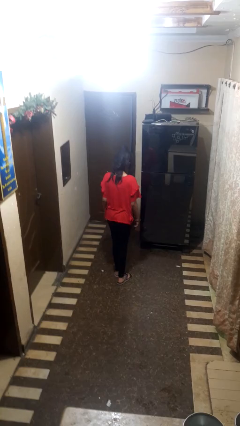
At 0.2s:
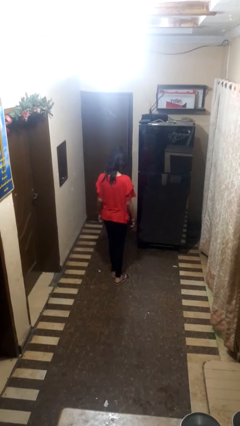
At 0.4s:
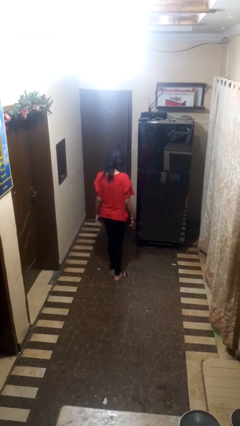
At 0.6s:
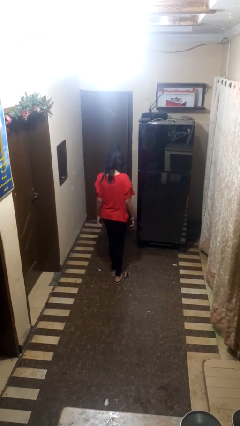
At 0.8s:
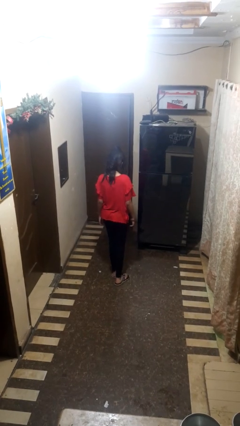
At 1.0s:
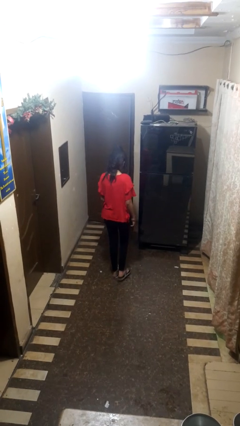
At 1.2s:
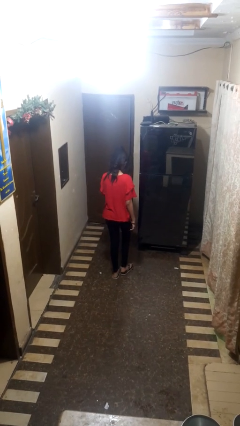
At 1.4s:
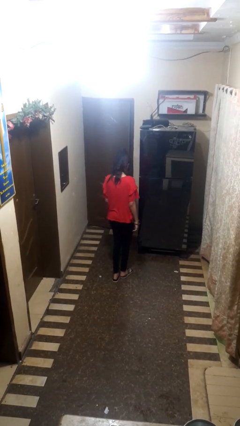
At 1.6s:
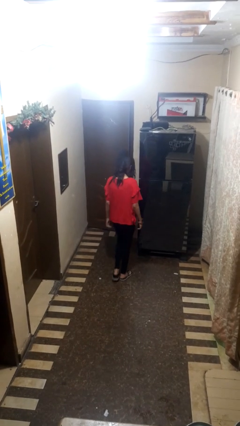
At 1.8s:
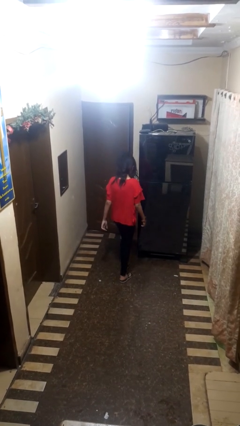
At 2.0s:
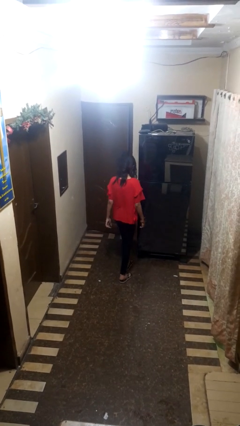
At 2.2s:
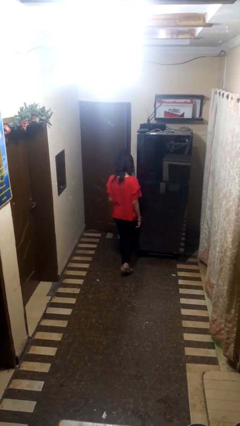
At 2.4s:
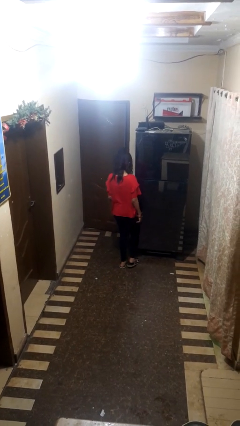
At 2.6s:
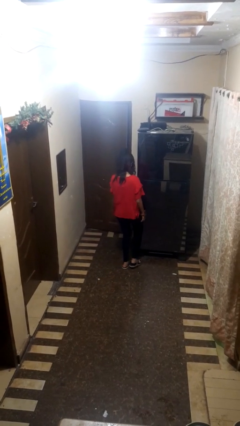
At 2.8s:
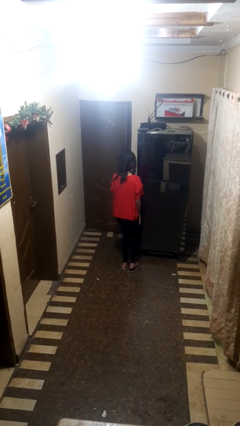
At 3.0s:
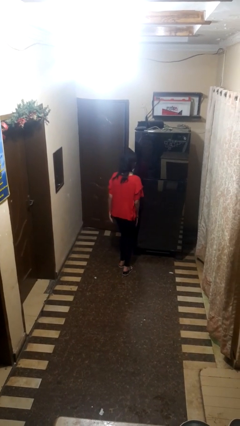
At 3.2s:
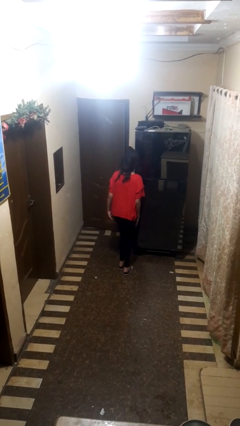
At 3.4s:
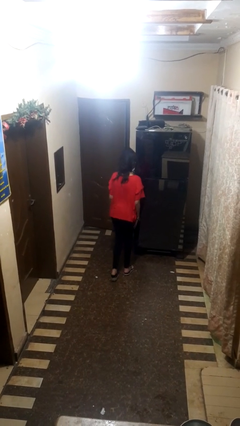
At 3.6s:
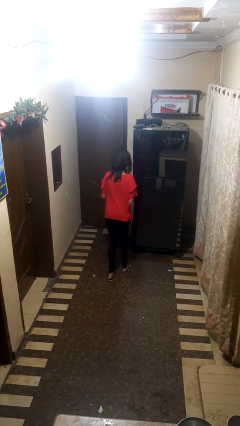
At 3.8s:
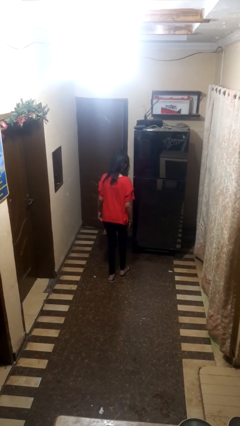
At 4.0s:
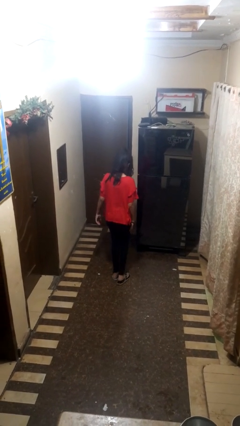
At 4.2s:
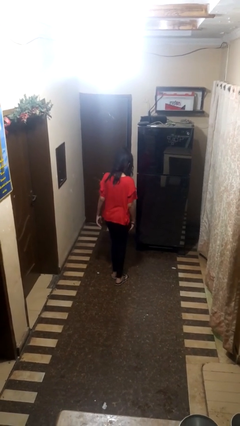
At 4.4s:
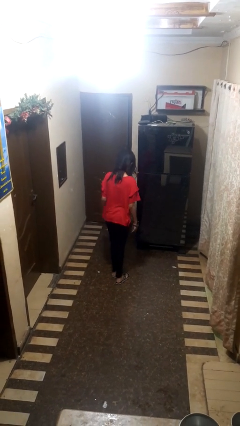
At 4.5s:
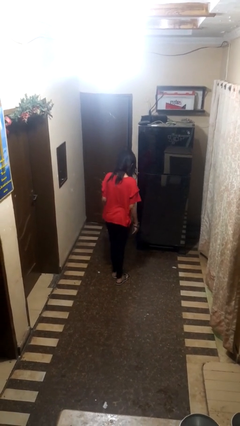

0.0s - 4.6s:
person stubs toe

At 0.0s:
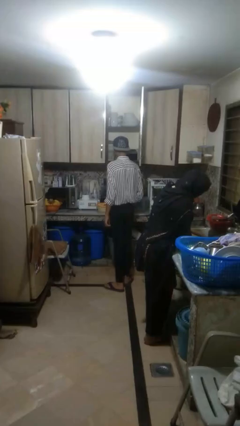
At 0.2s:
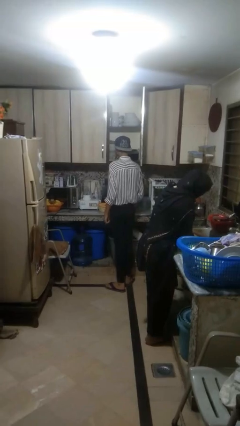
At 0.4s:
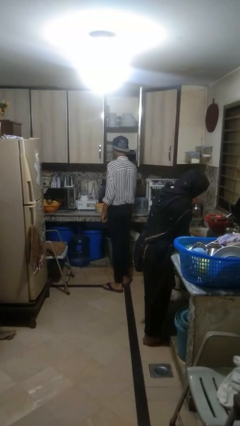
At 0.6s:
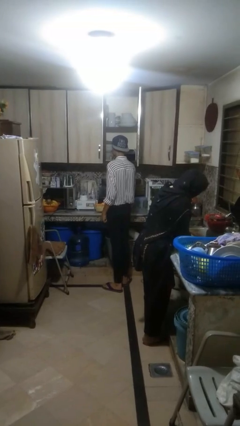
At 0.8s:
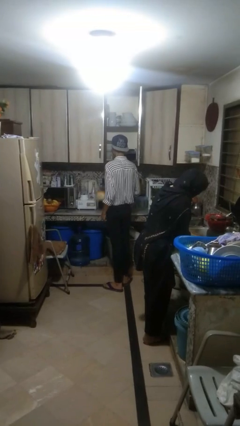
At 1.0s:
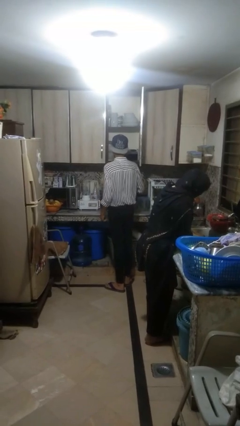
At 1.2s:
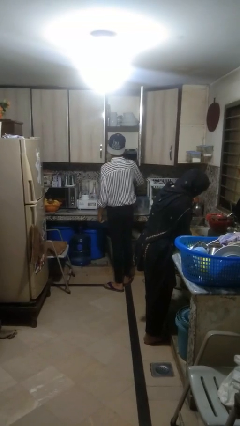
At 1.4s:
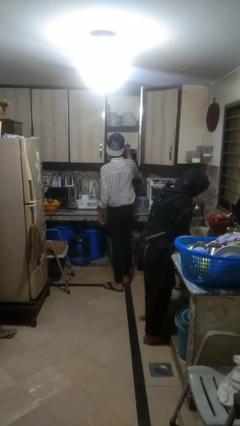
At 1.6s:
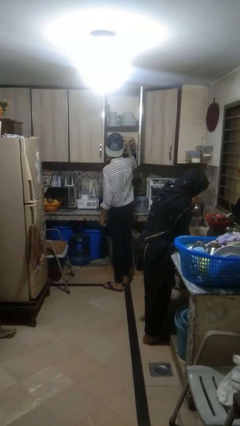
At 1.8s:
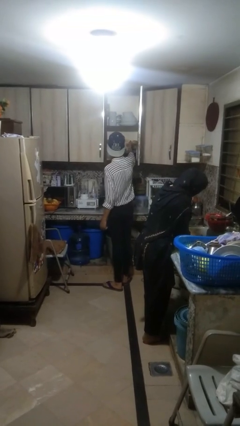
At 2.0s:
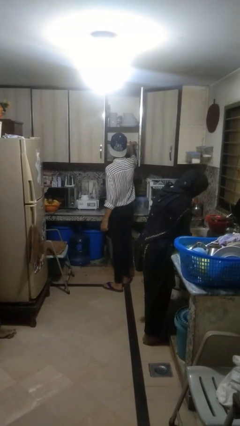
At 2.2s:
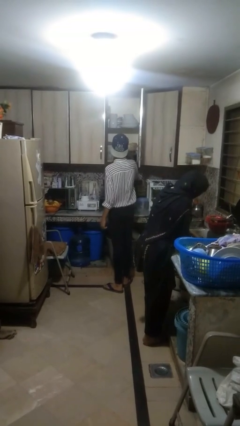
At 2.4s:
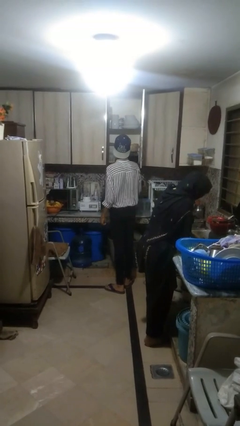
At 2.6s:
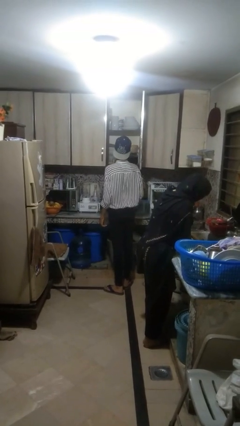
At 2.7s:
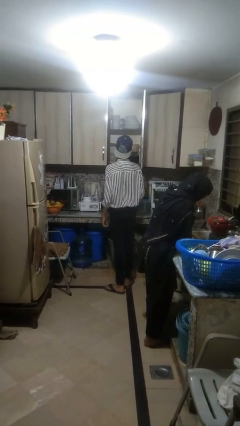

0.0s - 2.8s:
person puts object in cabinet

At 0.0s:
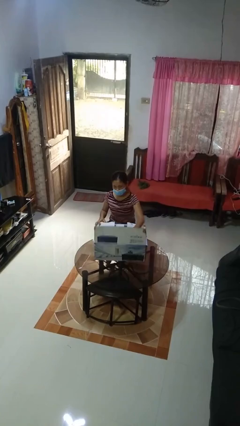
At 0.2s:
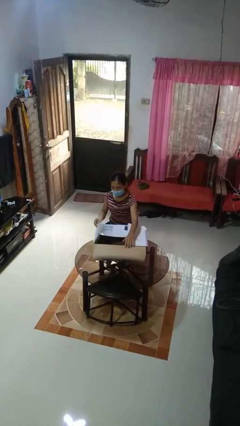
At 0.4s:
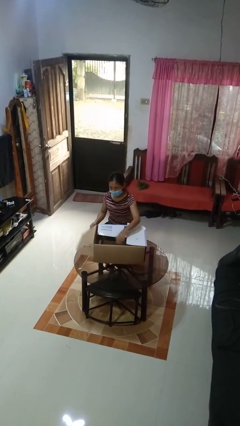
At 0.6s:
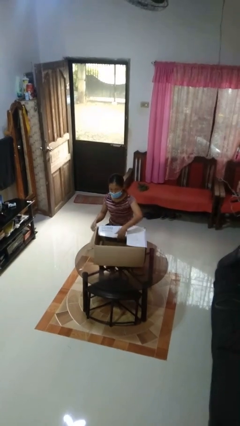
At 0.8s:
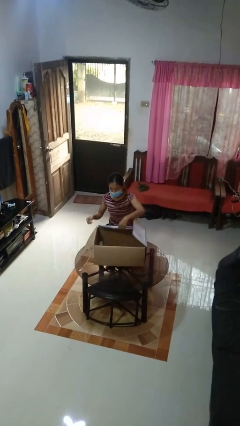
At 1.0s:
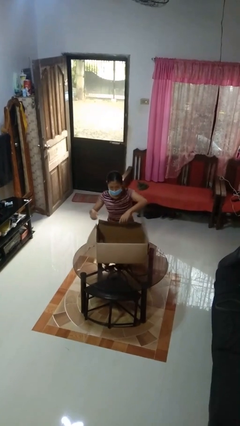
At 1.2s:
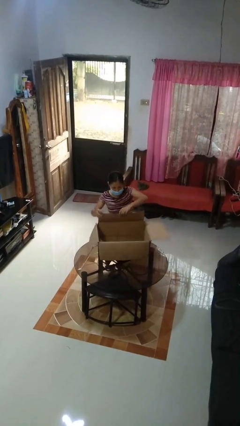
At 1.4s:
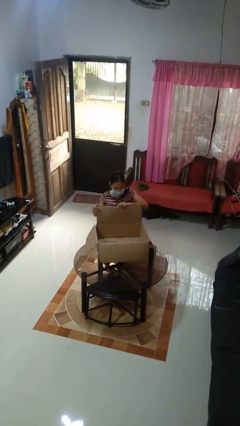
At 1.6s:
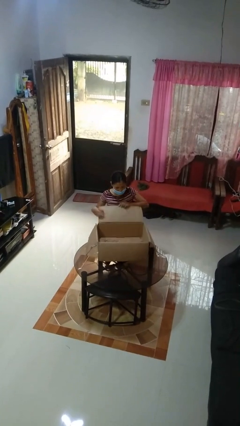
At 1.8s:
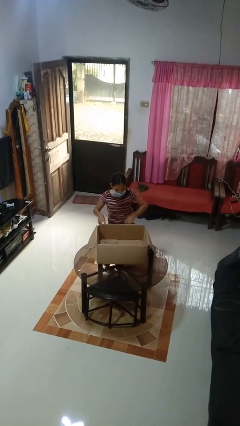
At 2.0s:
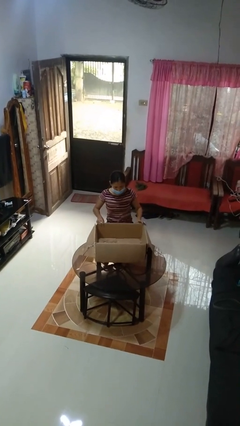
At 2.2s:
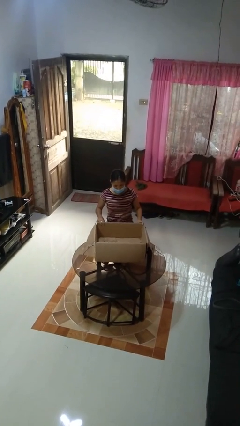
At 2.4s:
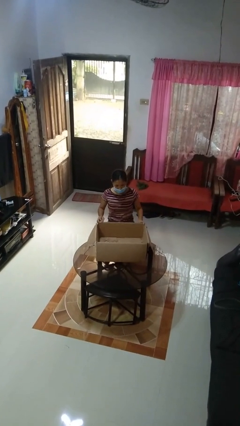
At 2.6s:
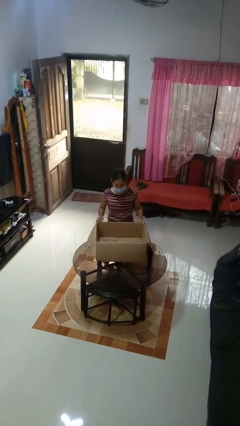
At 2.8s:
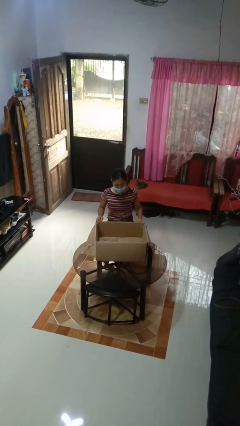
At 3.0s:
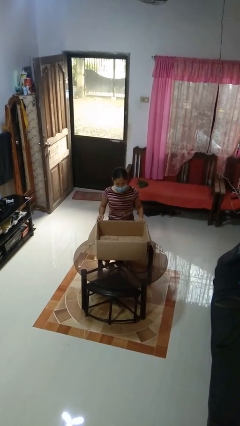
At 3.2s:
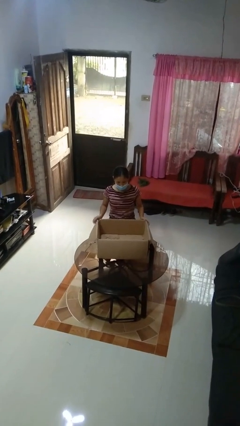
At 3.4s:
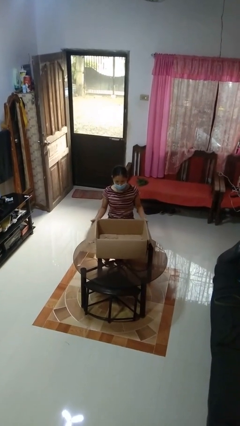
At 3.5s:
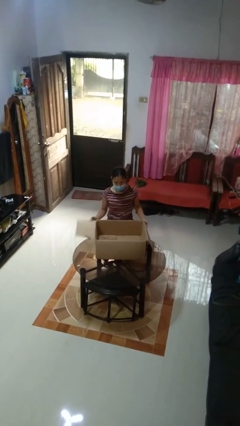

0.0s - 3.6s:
person opens box

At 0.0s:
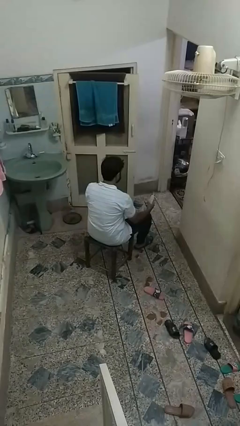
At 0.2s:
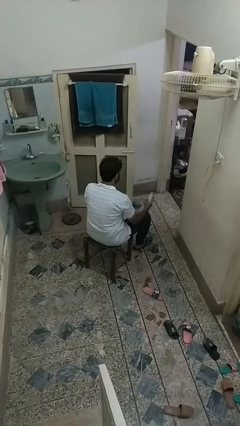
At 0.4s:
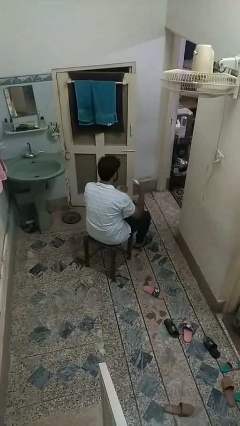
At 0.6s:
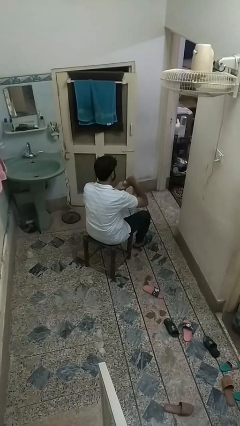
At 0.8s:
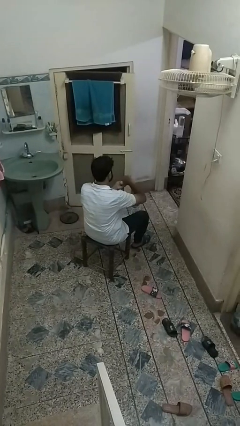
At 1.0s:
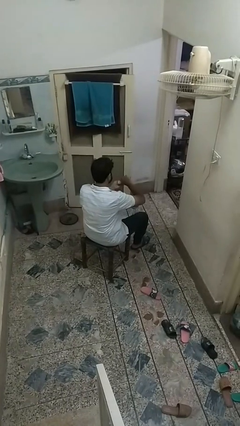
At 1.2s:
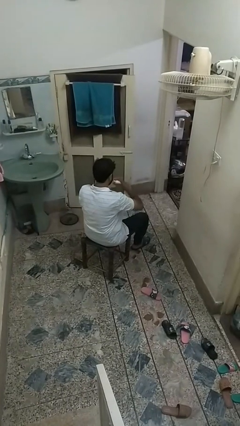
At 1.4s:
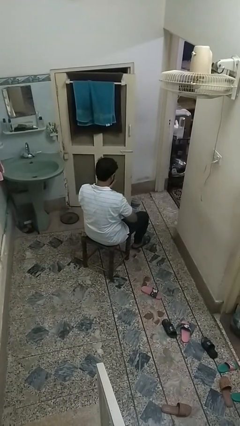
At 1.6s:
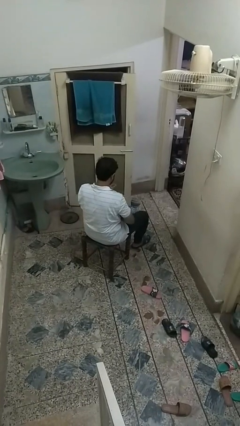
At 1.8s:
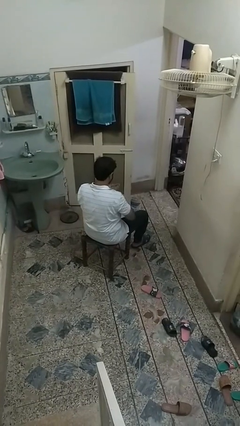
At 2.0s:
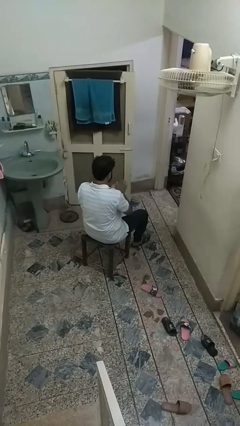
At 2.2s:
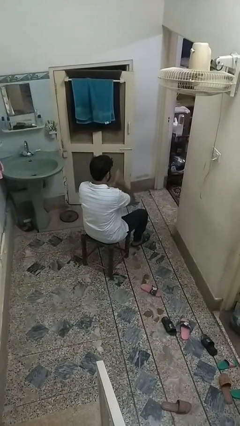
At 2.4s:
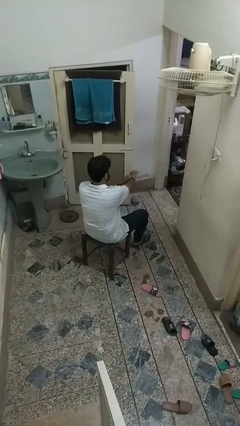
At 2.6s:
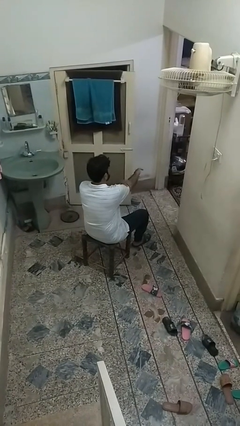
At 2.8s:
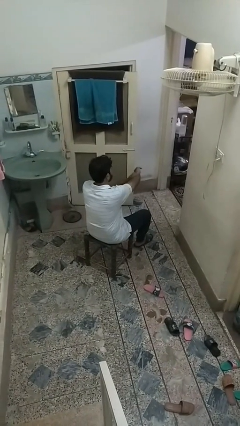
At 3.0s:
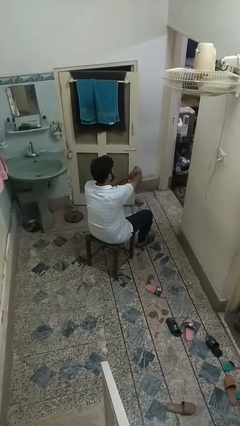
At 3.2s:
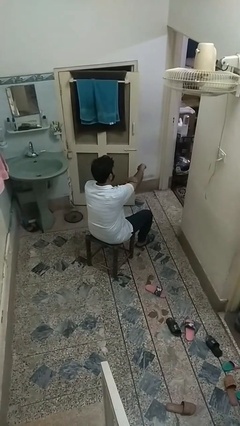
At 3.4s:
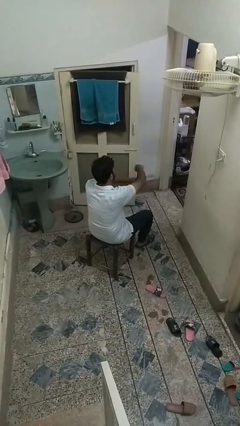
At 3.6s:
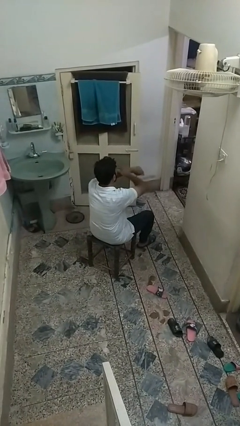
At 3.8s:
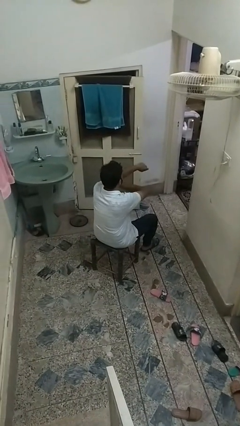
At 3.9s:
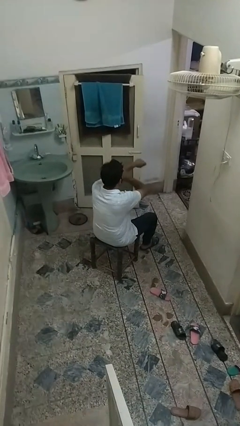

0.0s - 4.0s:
person applies sunscreen

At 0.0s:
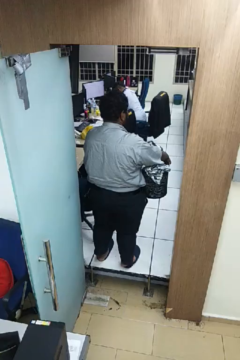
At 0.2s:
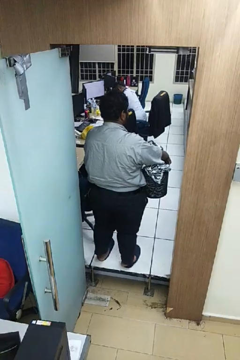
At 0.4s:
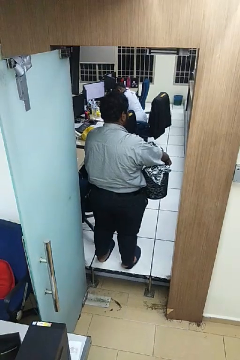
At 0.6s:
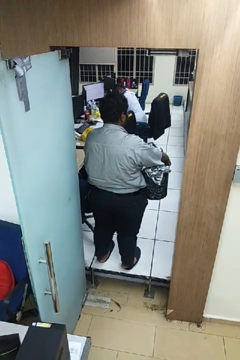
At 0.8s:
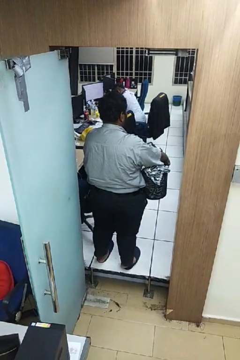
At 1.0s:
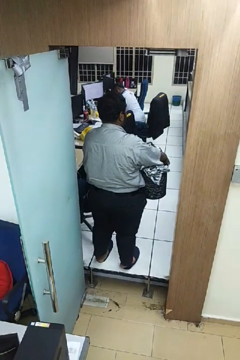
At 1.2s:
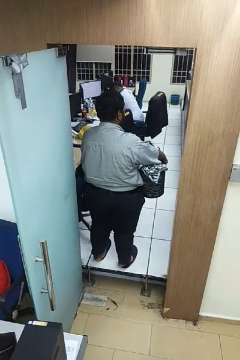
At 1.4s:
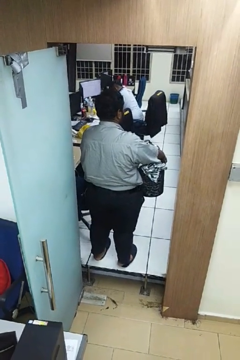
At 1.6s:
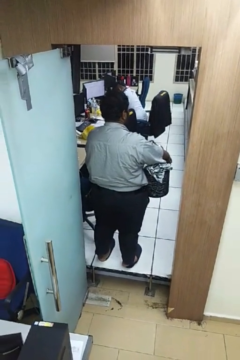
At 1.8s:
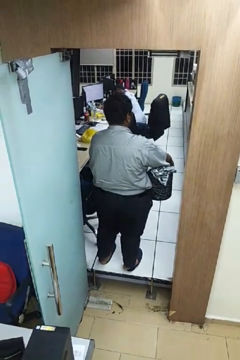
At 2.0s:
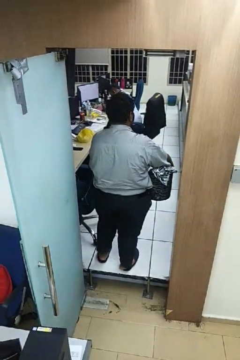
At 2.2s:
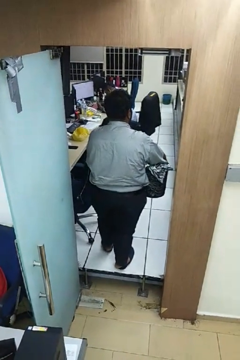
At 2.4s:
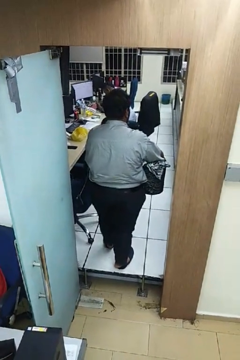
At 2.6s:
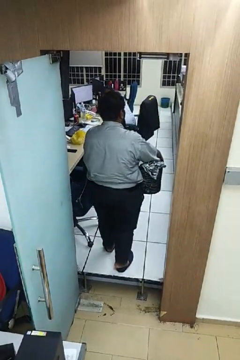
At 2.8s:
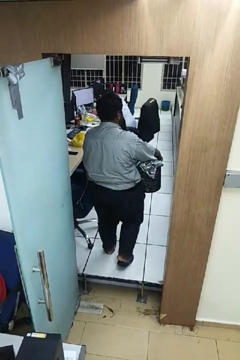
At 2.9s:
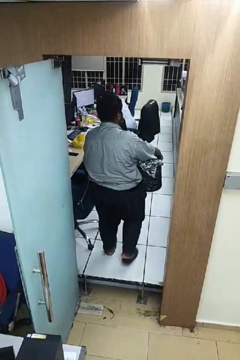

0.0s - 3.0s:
person carries laundry basket
